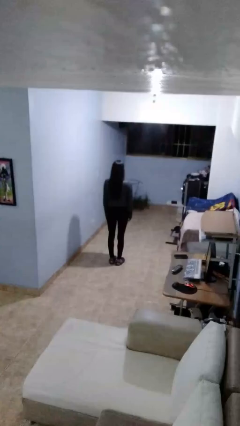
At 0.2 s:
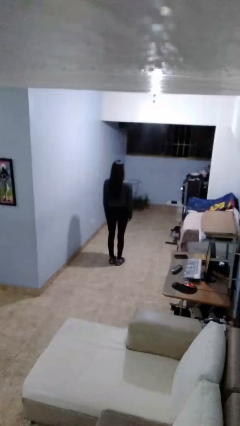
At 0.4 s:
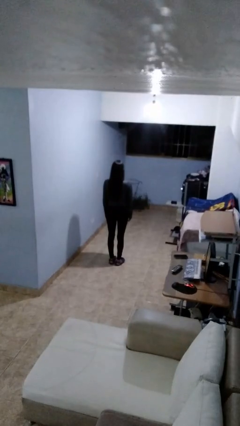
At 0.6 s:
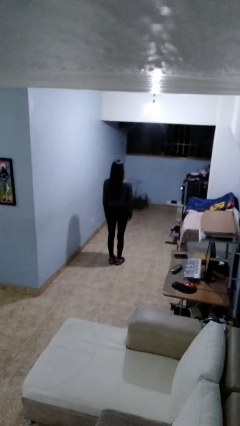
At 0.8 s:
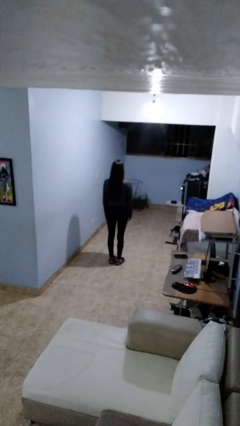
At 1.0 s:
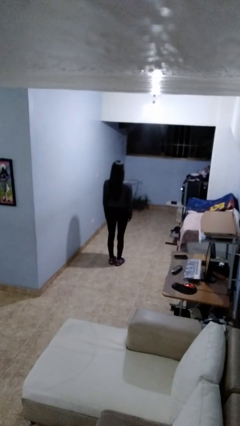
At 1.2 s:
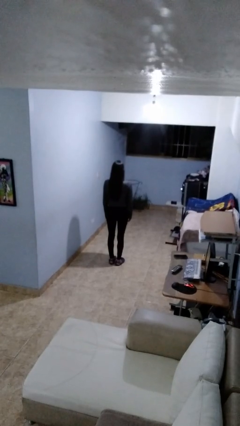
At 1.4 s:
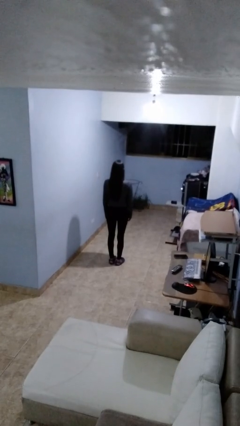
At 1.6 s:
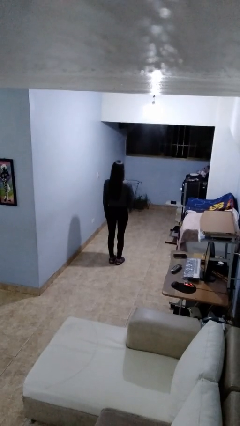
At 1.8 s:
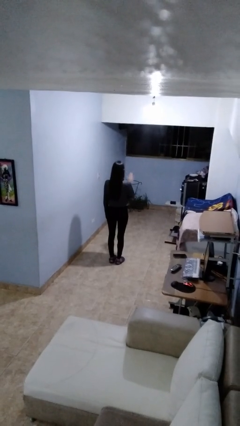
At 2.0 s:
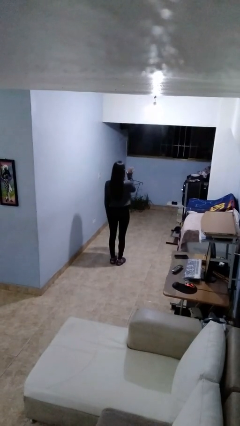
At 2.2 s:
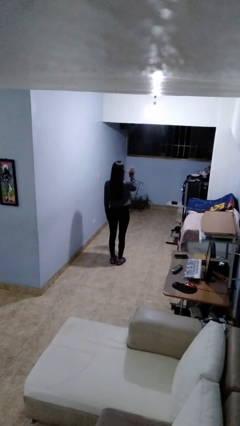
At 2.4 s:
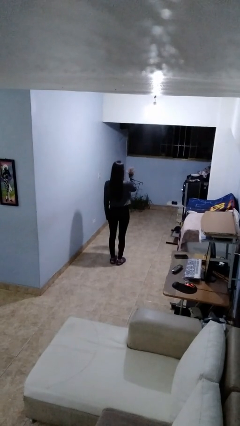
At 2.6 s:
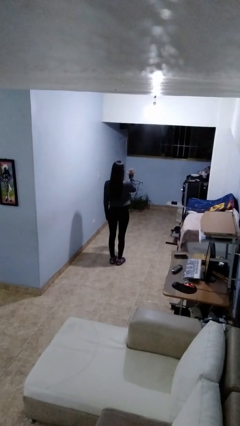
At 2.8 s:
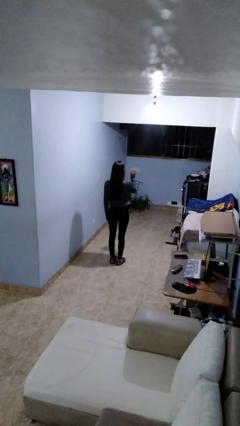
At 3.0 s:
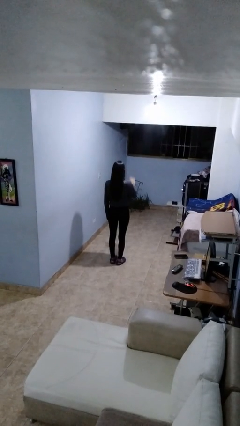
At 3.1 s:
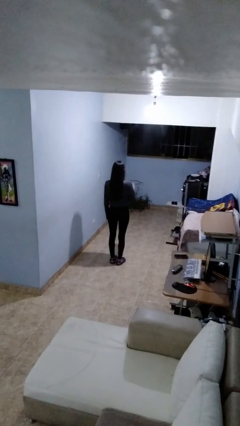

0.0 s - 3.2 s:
person salutes

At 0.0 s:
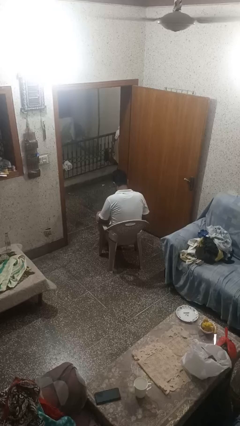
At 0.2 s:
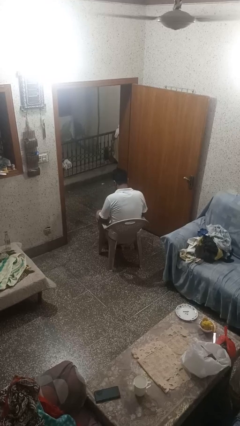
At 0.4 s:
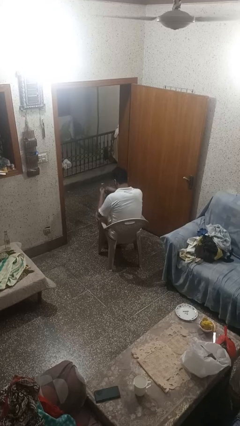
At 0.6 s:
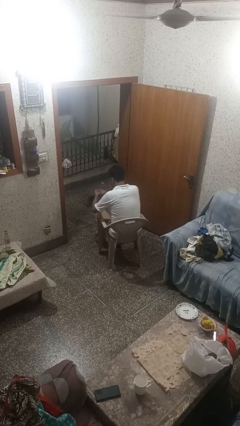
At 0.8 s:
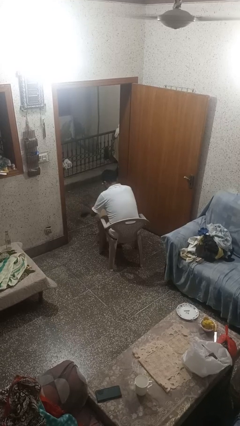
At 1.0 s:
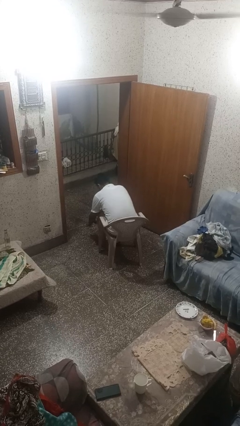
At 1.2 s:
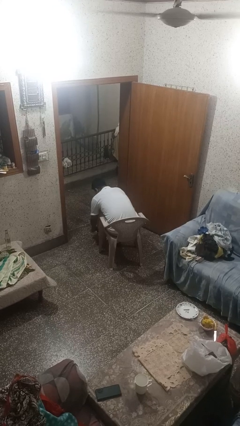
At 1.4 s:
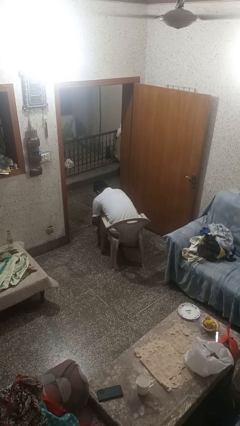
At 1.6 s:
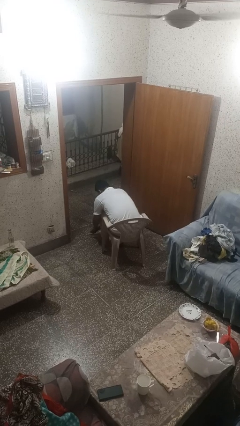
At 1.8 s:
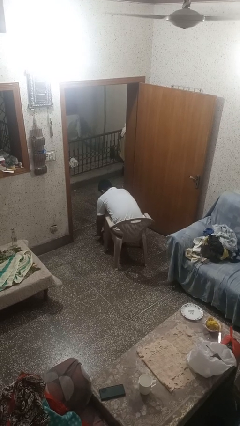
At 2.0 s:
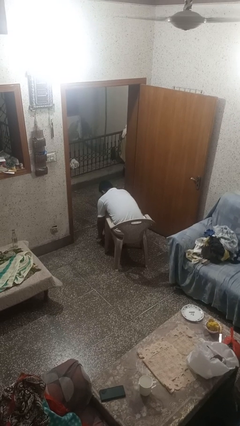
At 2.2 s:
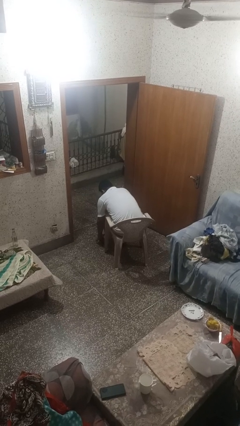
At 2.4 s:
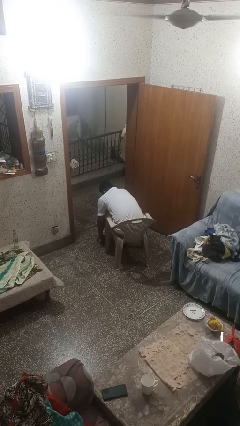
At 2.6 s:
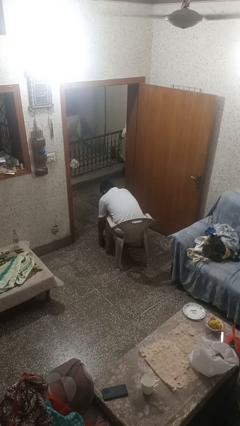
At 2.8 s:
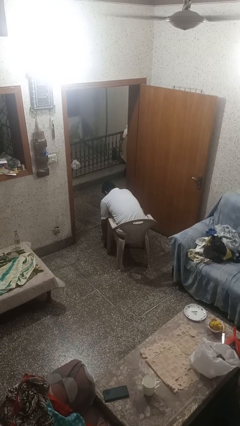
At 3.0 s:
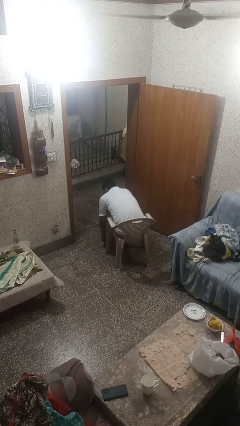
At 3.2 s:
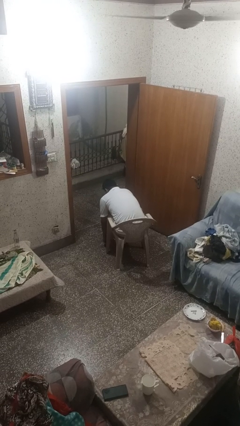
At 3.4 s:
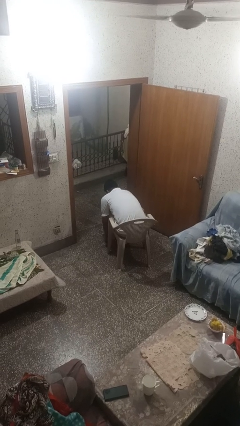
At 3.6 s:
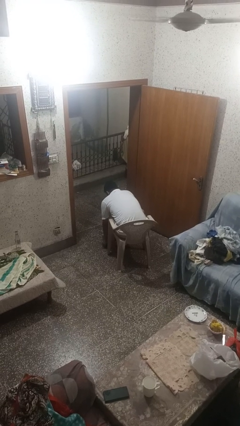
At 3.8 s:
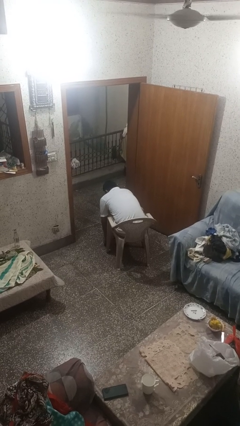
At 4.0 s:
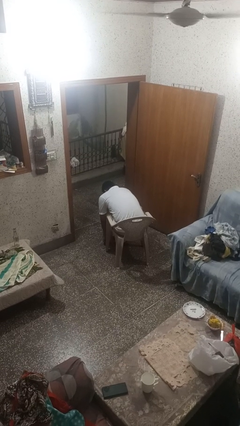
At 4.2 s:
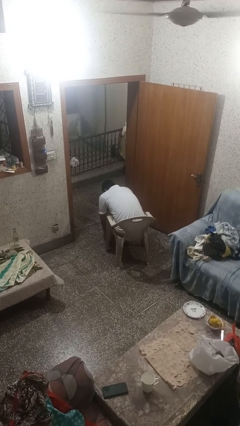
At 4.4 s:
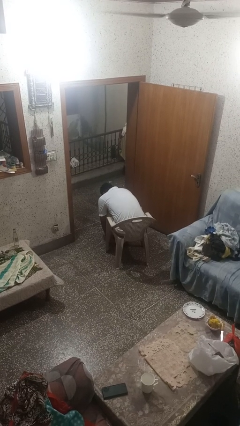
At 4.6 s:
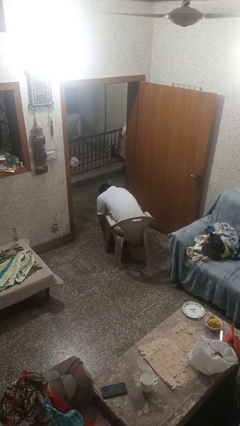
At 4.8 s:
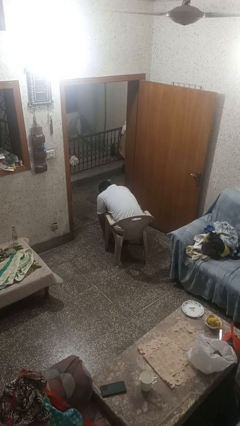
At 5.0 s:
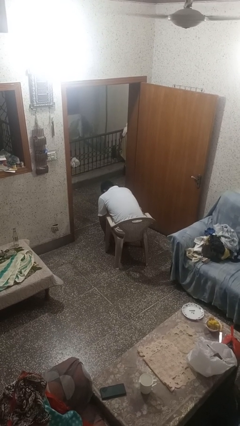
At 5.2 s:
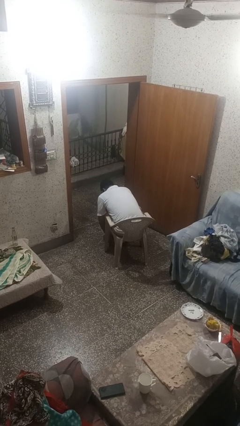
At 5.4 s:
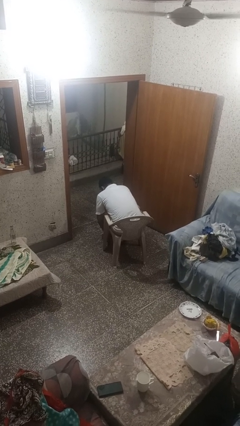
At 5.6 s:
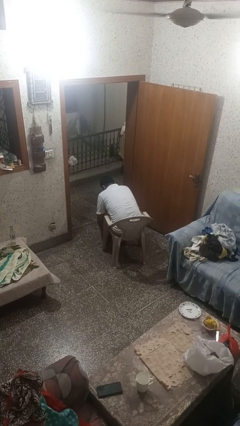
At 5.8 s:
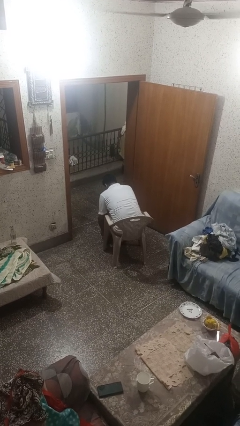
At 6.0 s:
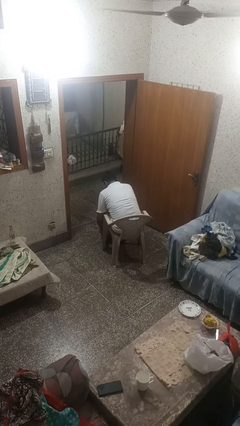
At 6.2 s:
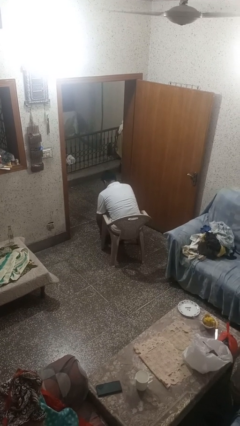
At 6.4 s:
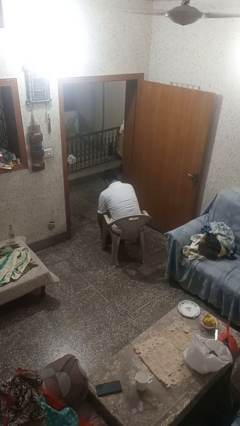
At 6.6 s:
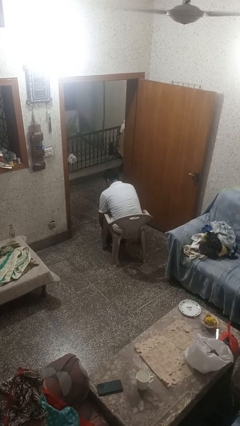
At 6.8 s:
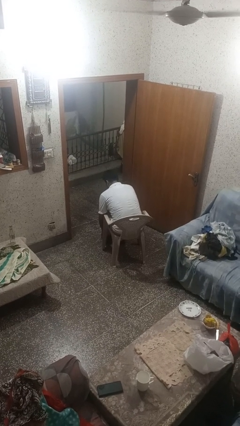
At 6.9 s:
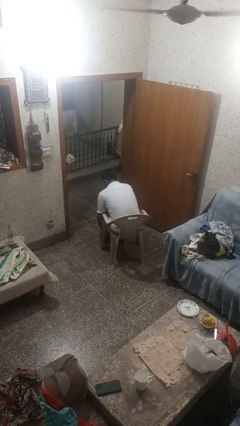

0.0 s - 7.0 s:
person puts on socks

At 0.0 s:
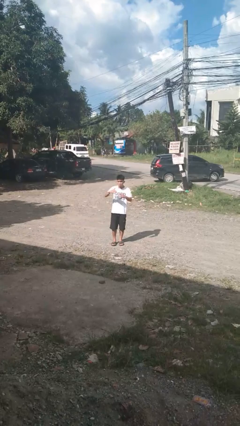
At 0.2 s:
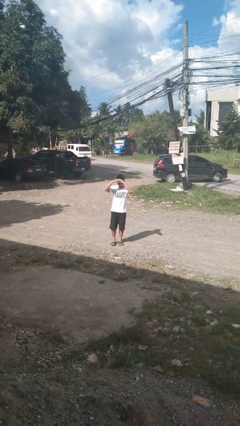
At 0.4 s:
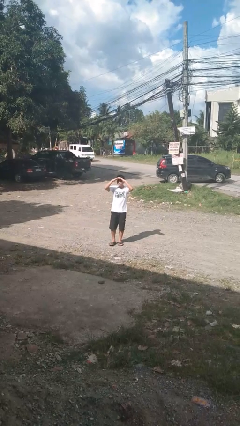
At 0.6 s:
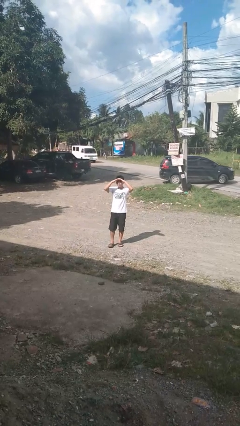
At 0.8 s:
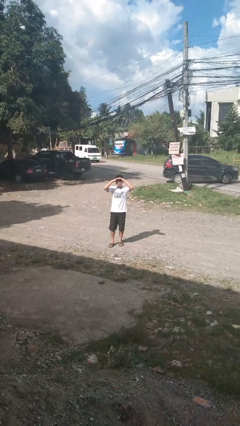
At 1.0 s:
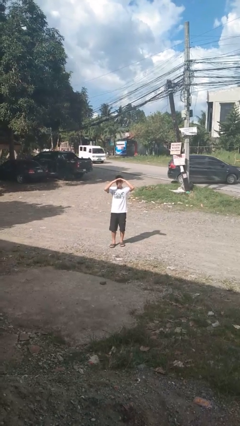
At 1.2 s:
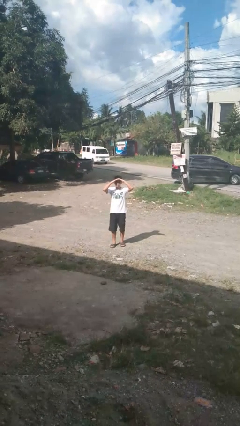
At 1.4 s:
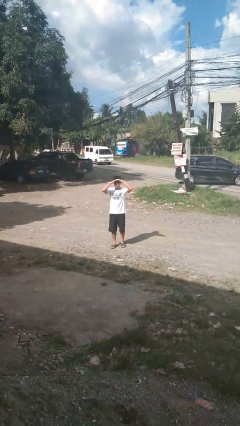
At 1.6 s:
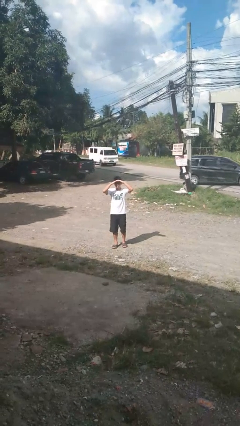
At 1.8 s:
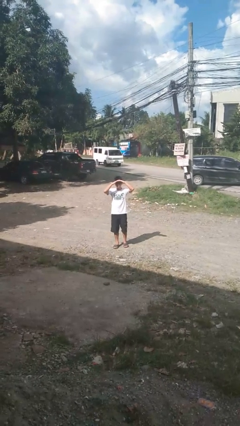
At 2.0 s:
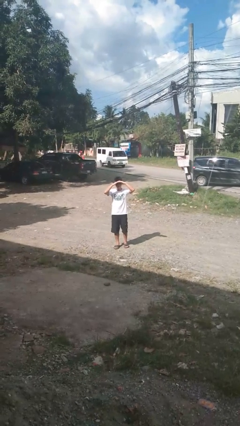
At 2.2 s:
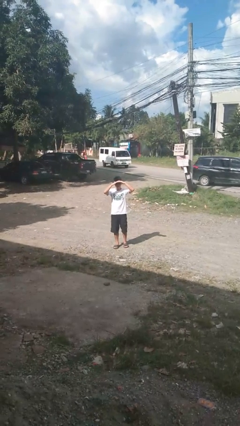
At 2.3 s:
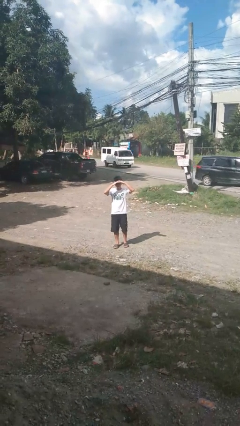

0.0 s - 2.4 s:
person shades eyes

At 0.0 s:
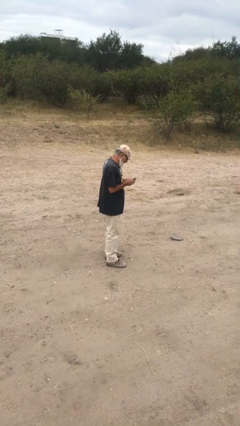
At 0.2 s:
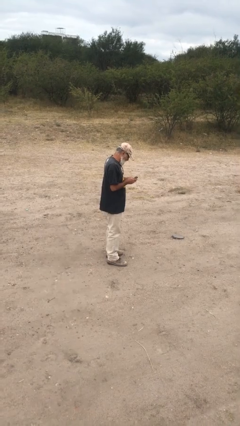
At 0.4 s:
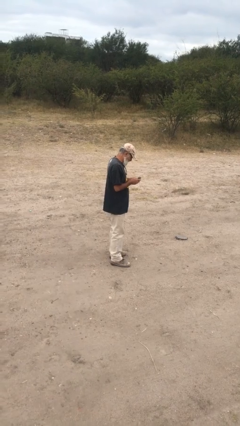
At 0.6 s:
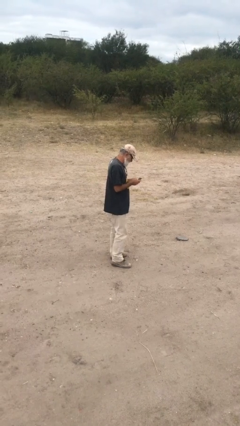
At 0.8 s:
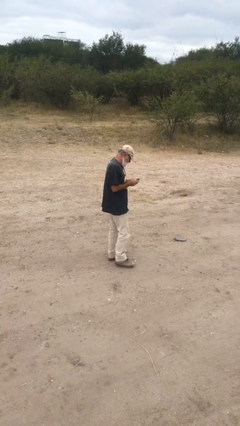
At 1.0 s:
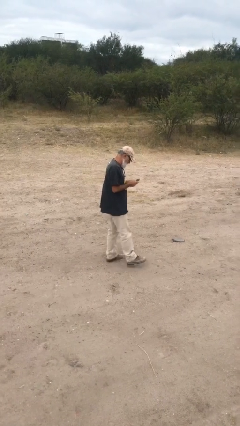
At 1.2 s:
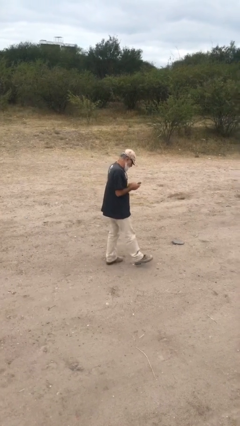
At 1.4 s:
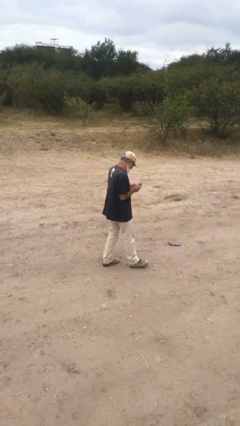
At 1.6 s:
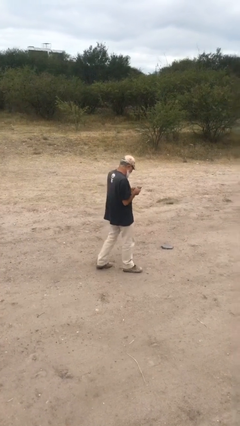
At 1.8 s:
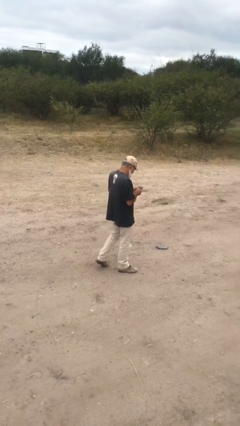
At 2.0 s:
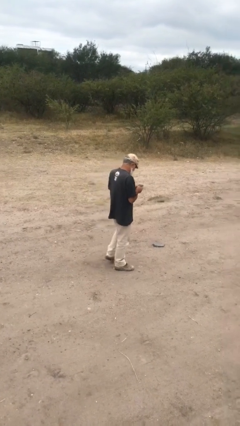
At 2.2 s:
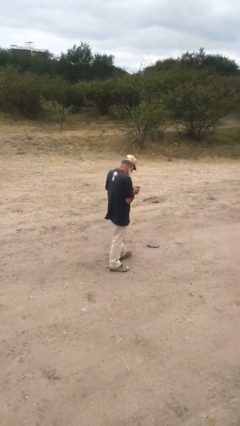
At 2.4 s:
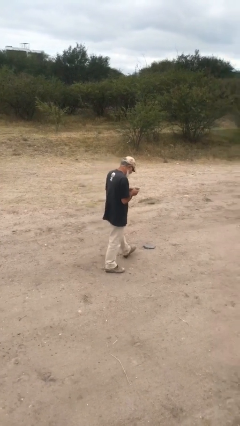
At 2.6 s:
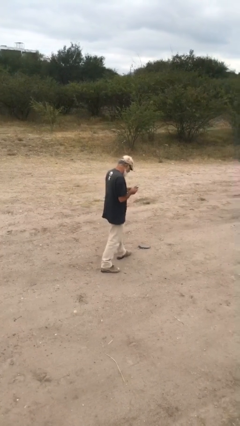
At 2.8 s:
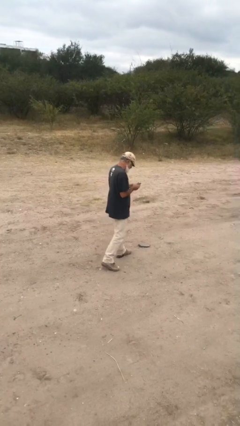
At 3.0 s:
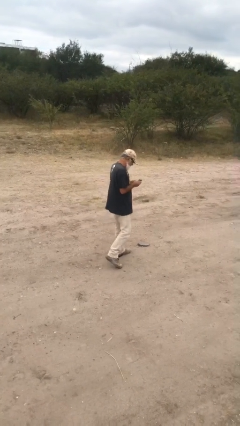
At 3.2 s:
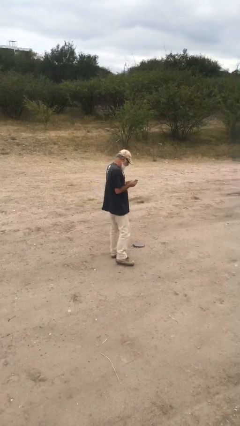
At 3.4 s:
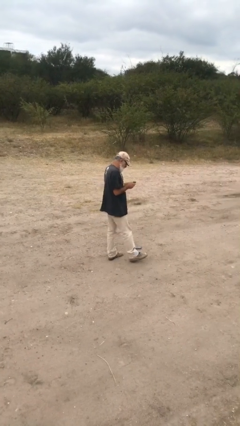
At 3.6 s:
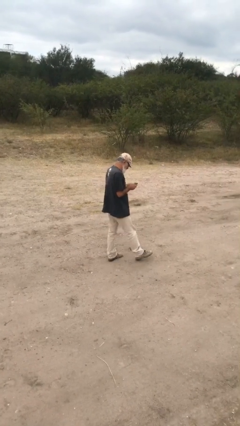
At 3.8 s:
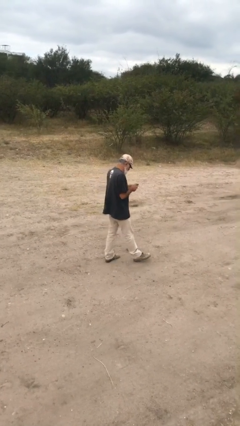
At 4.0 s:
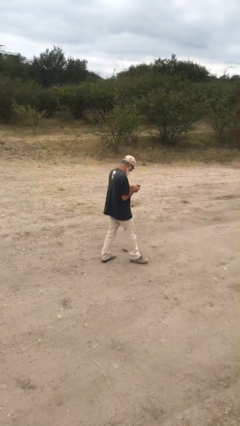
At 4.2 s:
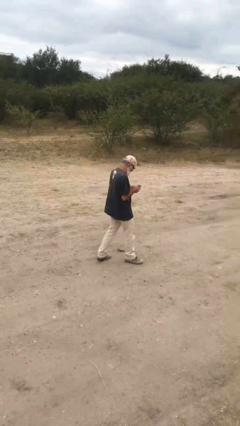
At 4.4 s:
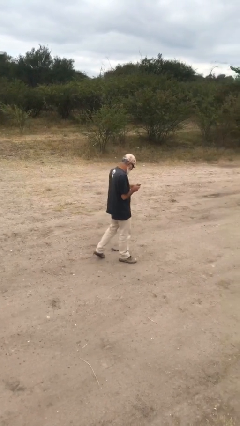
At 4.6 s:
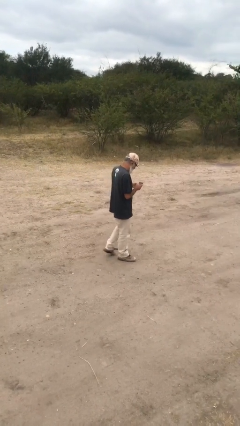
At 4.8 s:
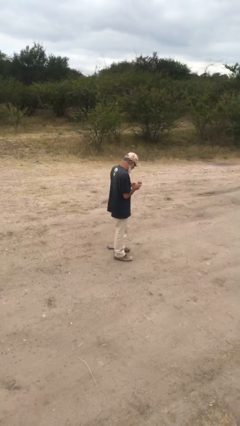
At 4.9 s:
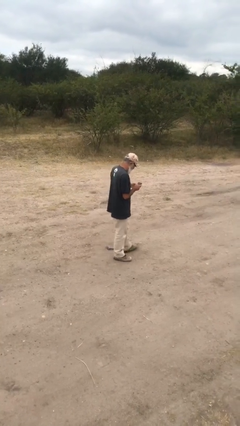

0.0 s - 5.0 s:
person texts on phone
